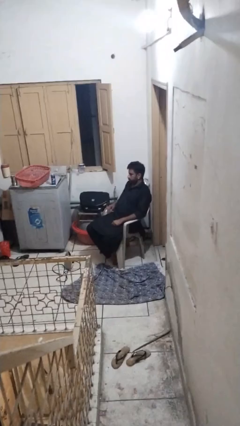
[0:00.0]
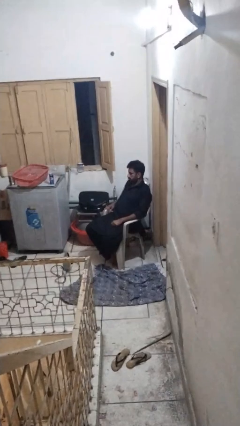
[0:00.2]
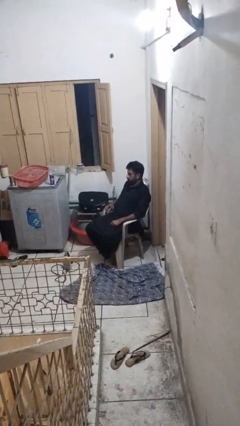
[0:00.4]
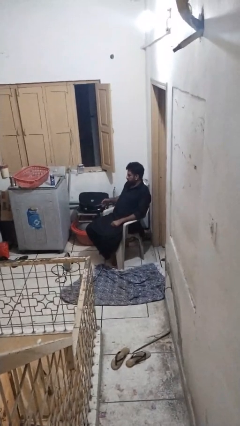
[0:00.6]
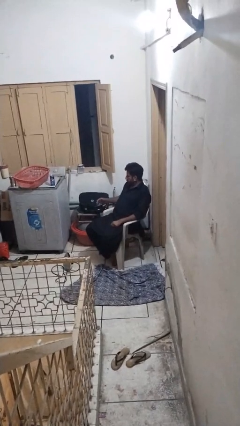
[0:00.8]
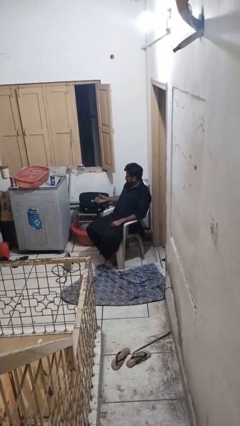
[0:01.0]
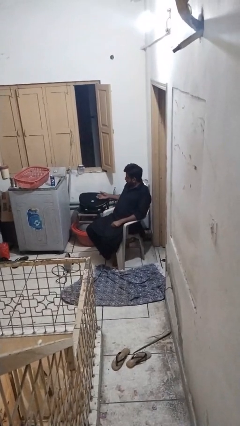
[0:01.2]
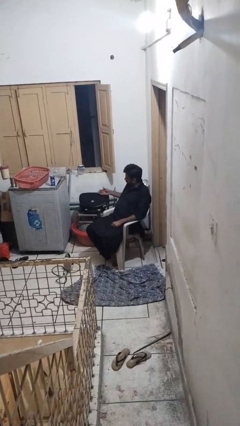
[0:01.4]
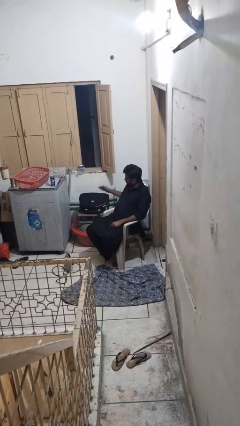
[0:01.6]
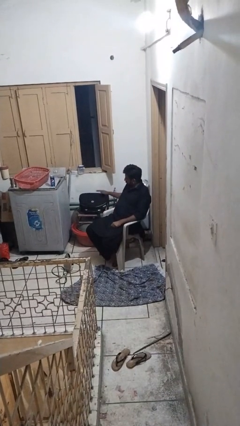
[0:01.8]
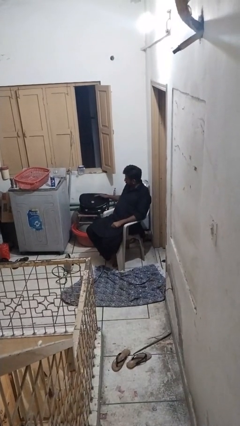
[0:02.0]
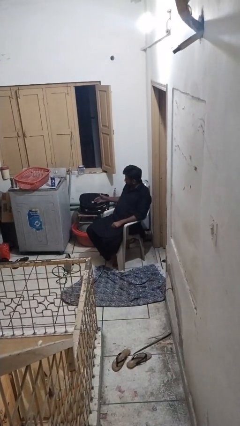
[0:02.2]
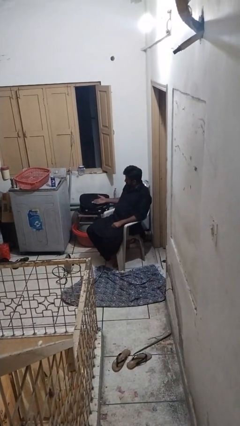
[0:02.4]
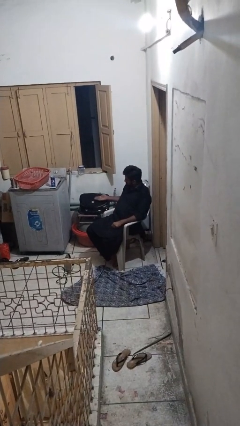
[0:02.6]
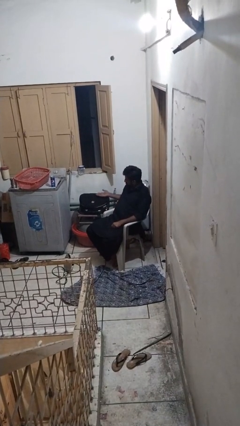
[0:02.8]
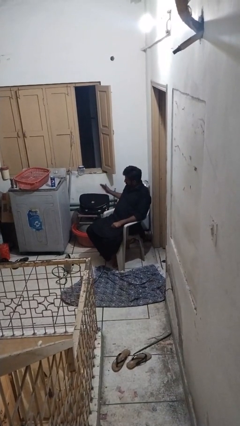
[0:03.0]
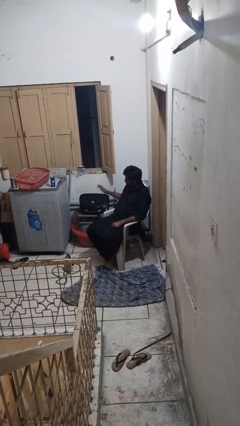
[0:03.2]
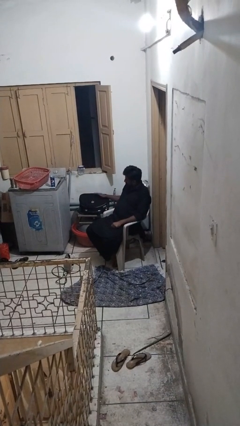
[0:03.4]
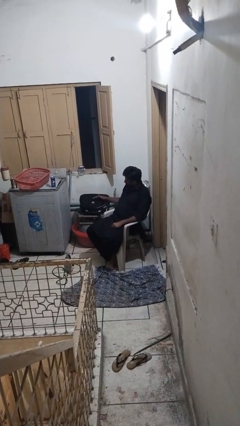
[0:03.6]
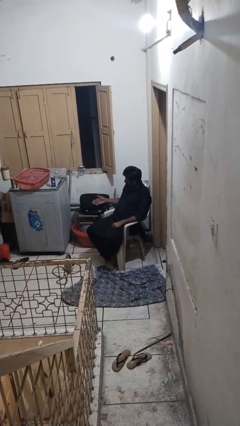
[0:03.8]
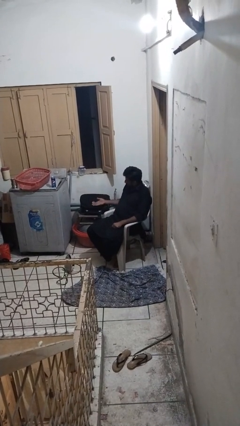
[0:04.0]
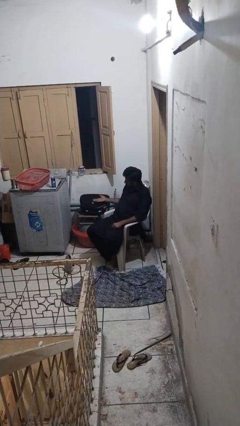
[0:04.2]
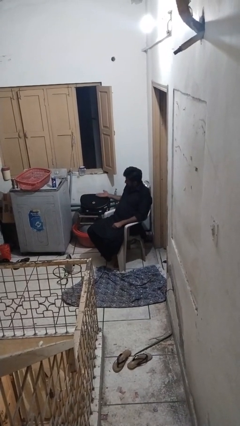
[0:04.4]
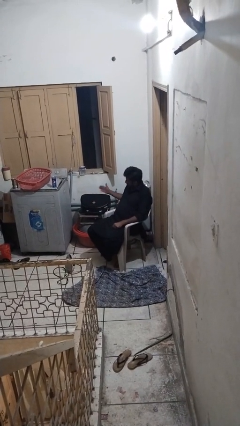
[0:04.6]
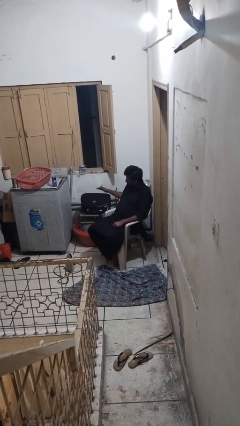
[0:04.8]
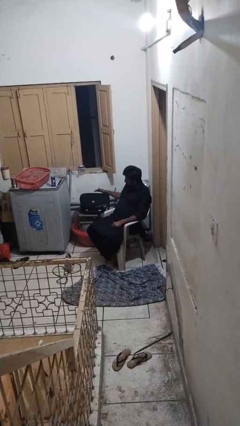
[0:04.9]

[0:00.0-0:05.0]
person waves hand over object

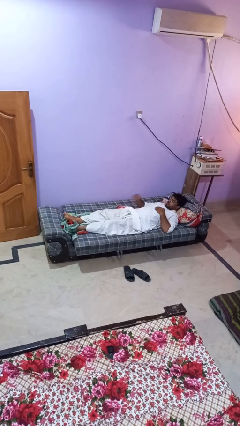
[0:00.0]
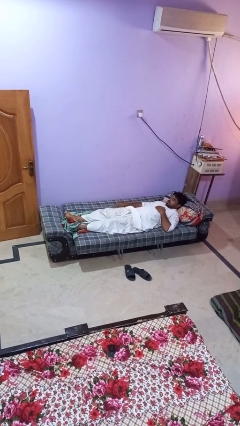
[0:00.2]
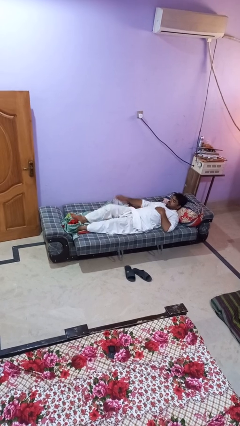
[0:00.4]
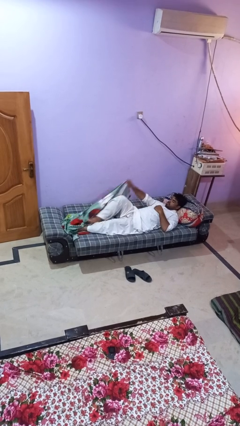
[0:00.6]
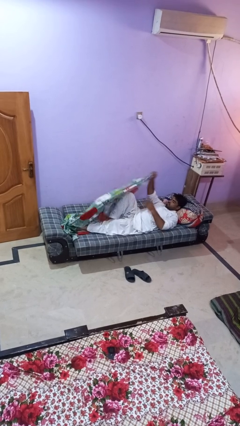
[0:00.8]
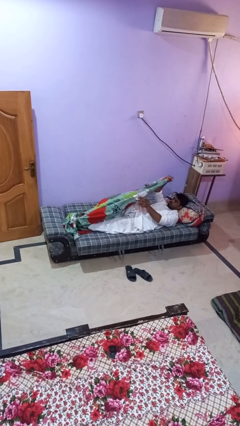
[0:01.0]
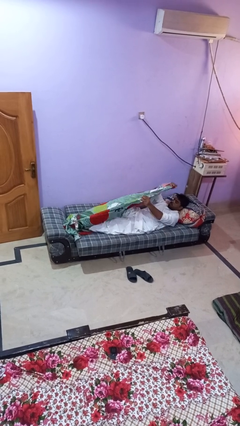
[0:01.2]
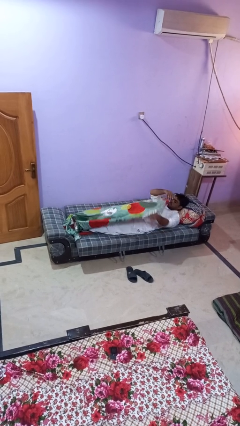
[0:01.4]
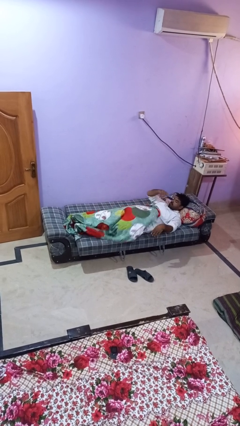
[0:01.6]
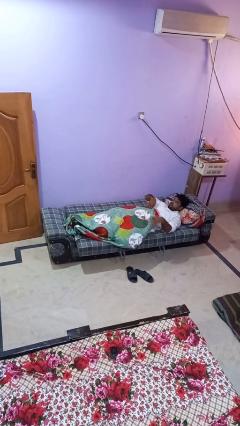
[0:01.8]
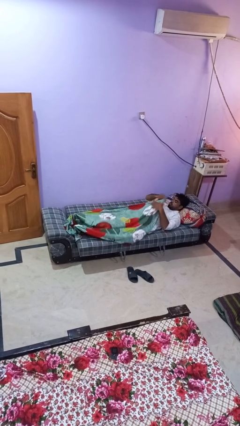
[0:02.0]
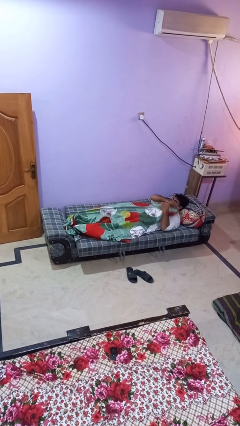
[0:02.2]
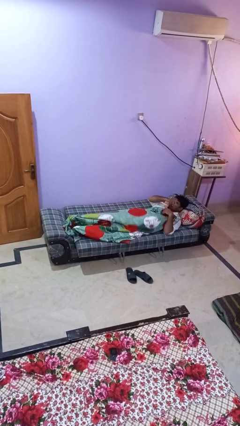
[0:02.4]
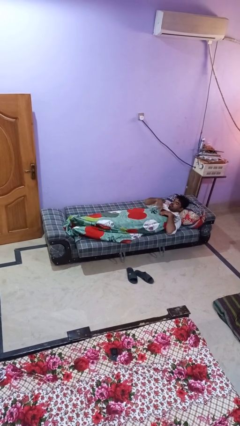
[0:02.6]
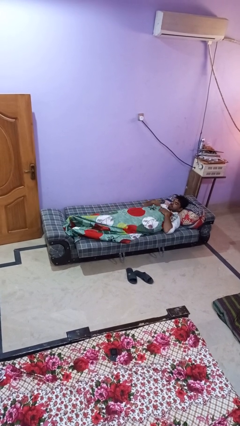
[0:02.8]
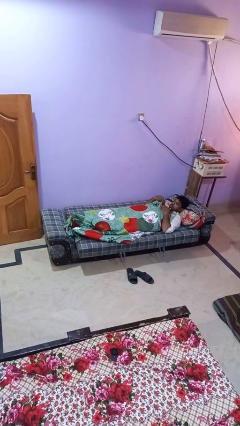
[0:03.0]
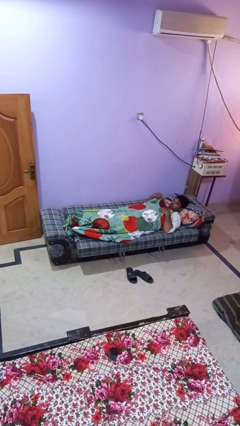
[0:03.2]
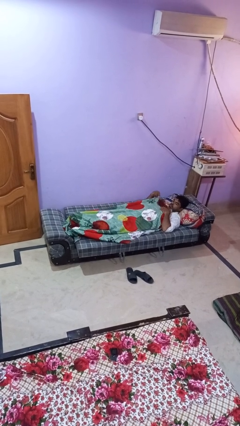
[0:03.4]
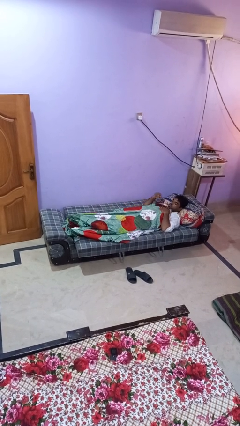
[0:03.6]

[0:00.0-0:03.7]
person covers with bedsheets

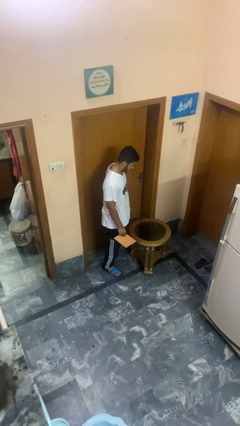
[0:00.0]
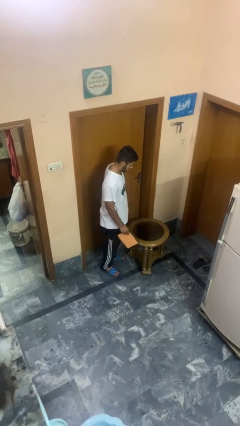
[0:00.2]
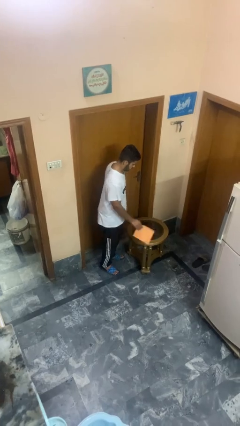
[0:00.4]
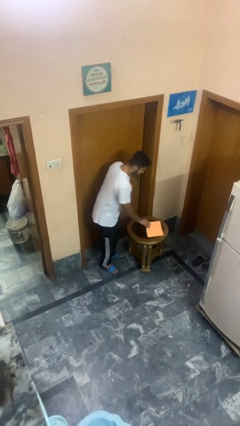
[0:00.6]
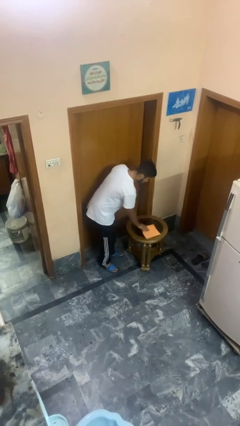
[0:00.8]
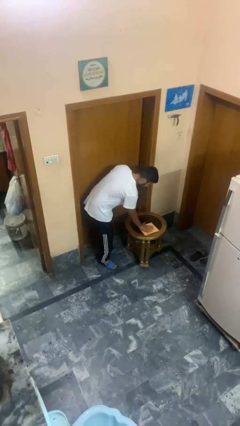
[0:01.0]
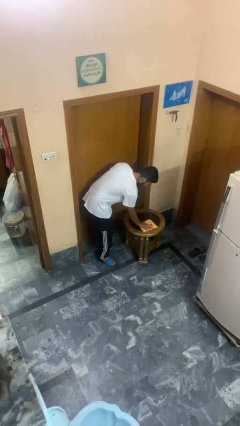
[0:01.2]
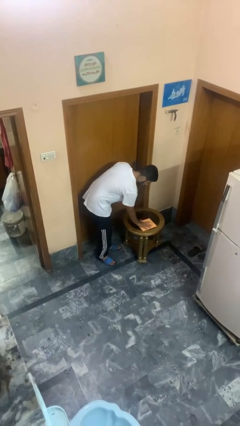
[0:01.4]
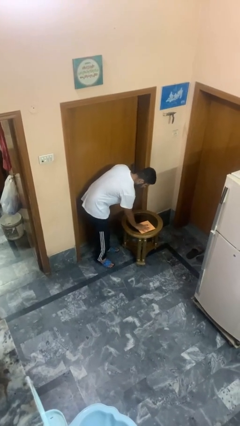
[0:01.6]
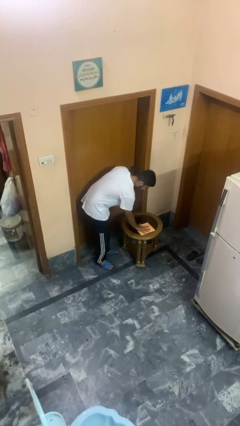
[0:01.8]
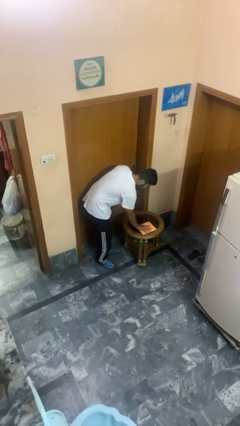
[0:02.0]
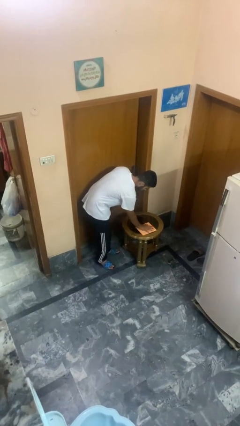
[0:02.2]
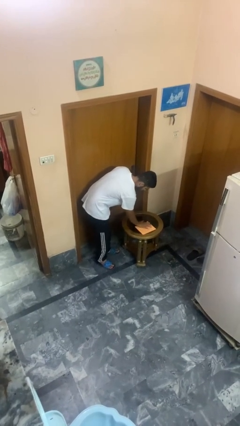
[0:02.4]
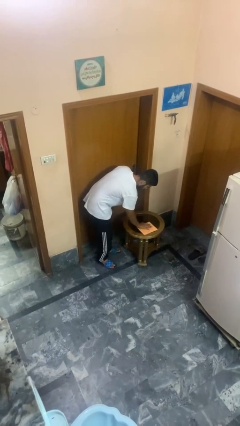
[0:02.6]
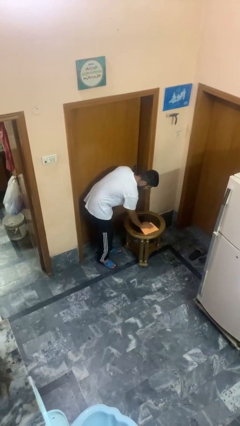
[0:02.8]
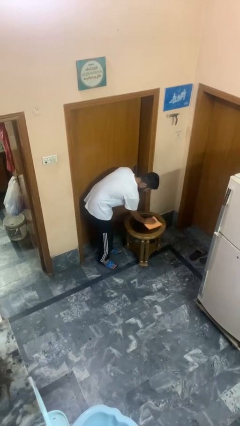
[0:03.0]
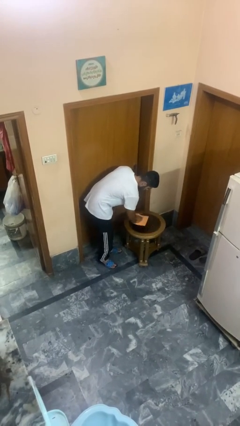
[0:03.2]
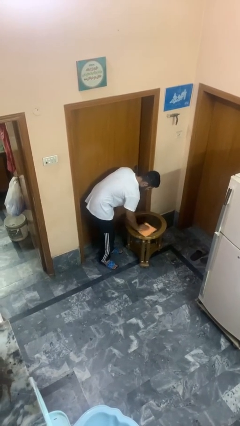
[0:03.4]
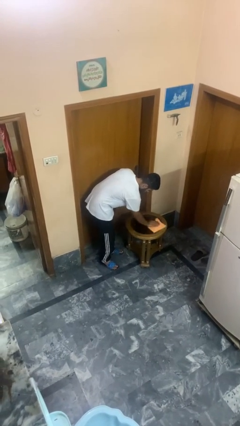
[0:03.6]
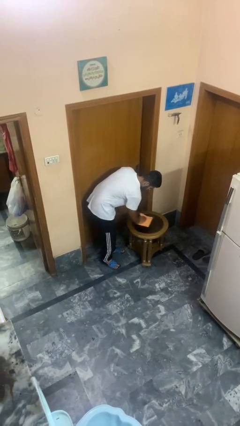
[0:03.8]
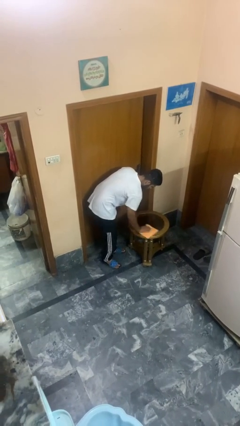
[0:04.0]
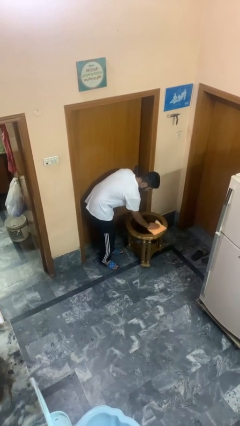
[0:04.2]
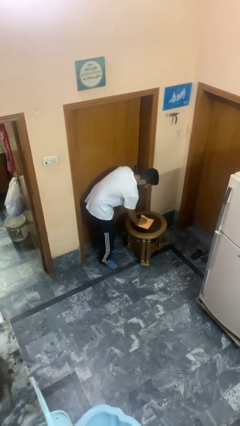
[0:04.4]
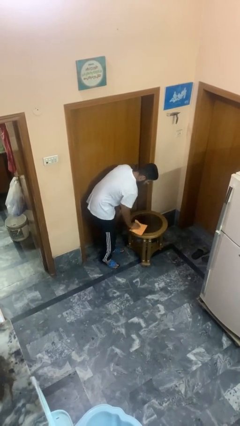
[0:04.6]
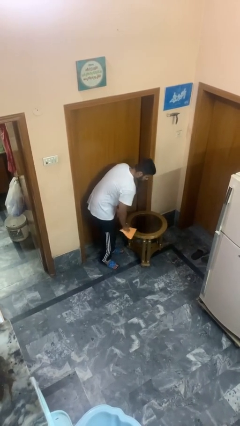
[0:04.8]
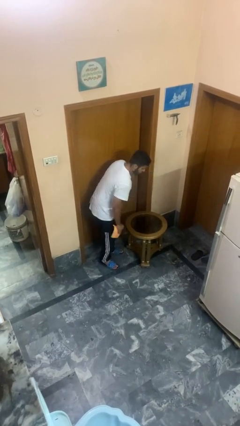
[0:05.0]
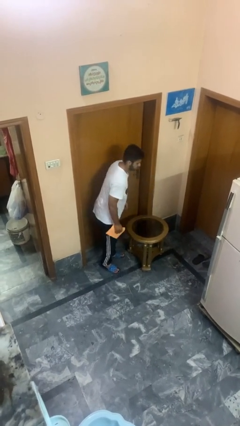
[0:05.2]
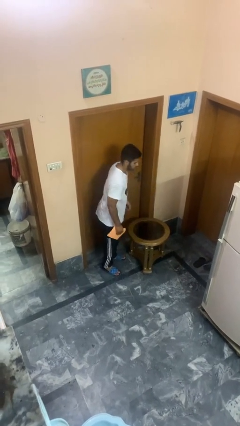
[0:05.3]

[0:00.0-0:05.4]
person cleans table with rag

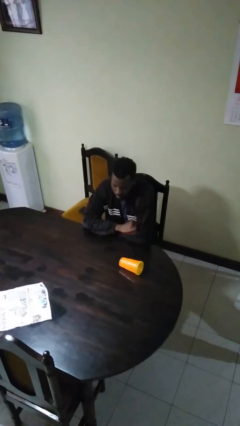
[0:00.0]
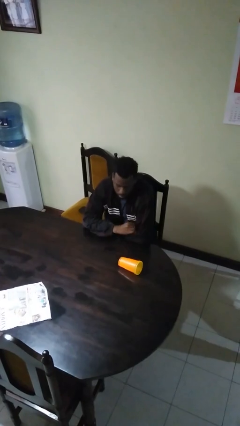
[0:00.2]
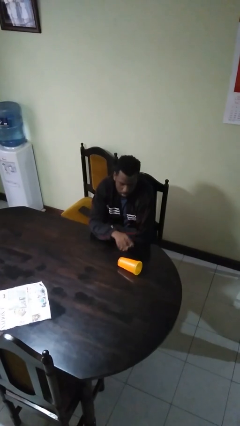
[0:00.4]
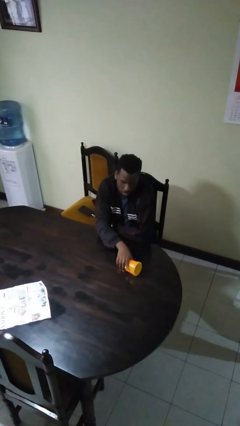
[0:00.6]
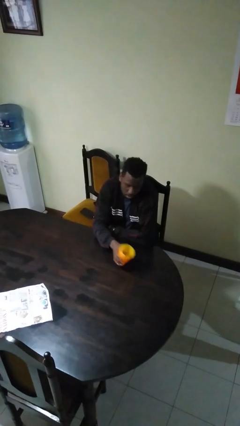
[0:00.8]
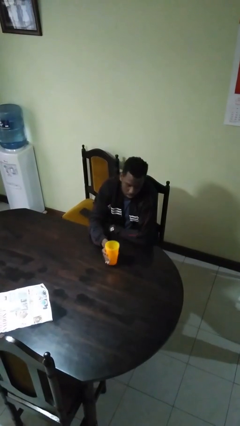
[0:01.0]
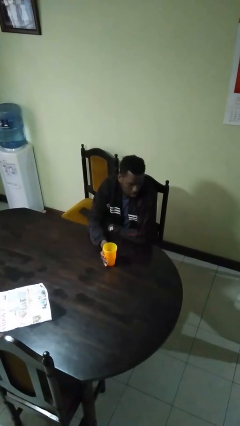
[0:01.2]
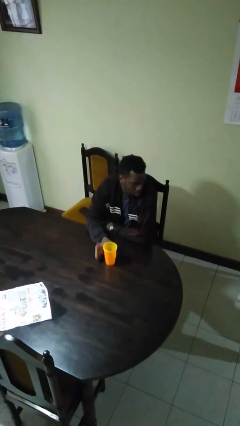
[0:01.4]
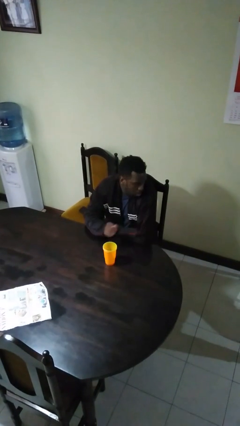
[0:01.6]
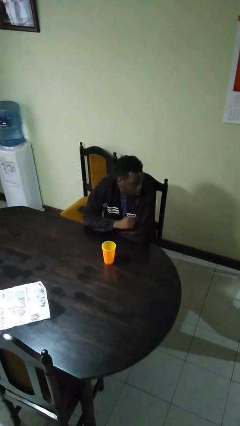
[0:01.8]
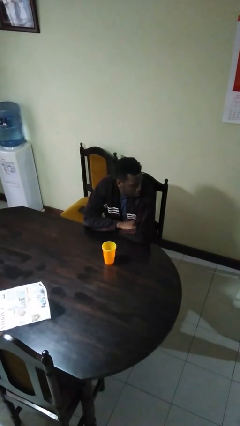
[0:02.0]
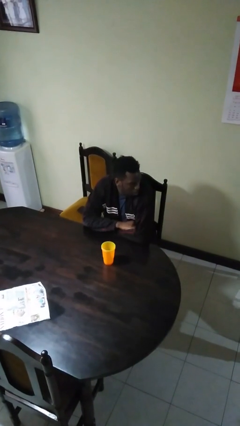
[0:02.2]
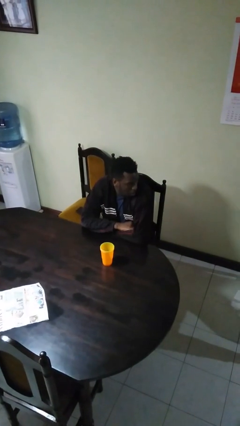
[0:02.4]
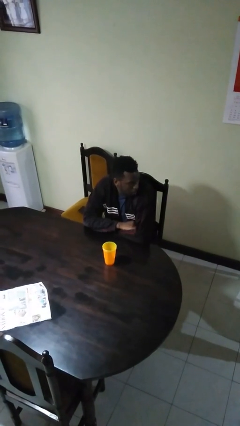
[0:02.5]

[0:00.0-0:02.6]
person sets upright glass

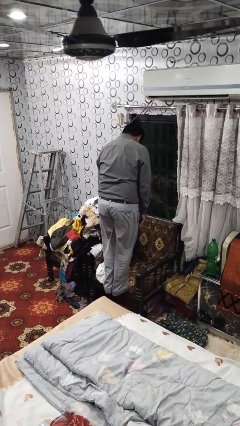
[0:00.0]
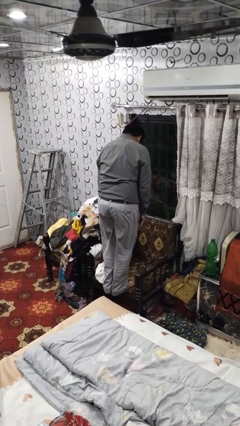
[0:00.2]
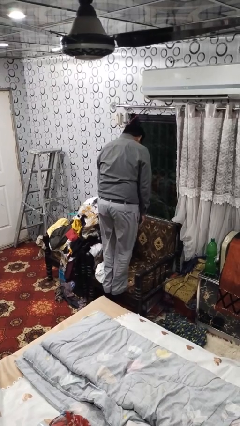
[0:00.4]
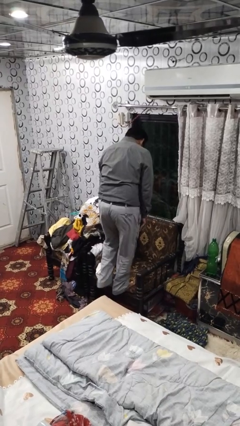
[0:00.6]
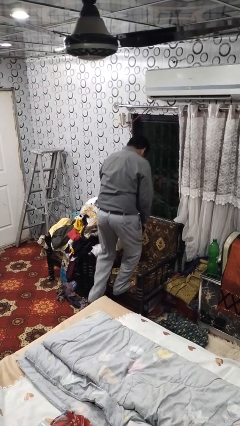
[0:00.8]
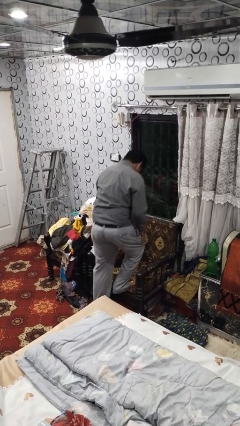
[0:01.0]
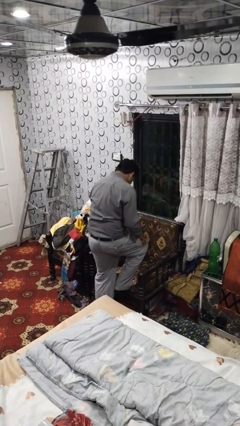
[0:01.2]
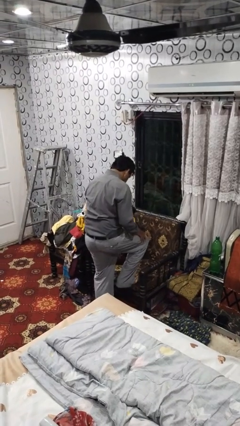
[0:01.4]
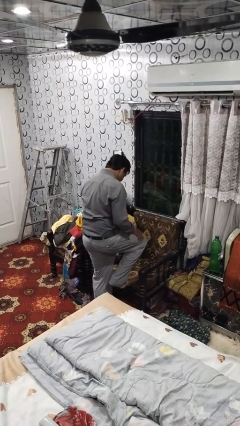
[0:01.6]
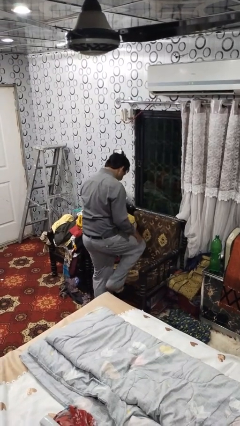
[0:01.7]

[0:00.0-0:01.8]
person climbs off couch
